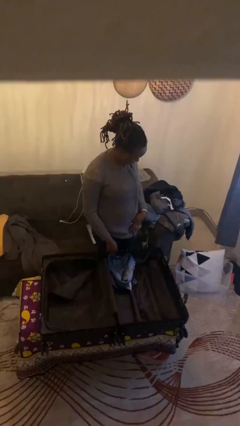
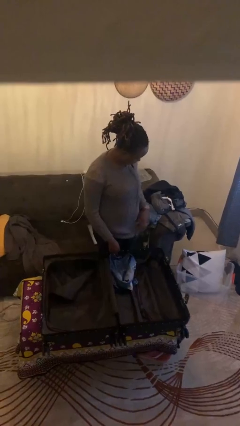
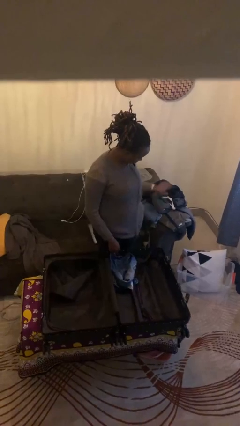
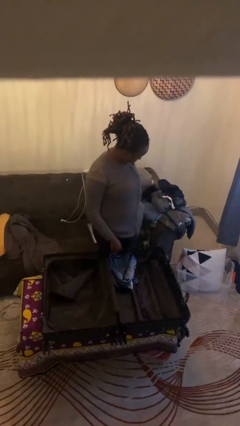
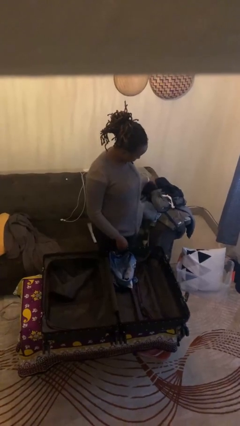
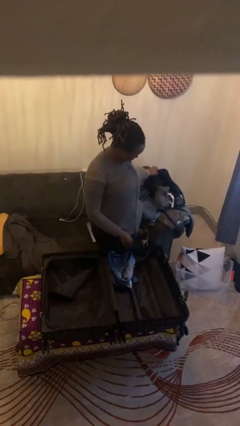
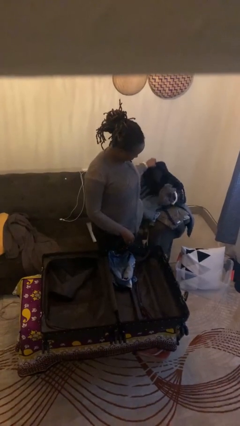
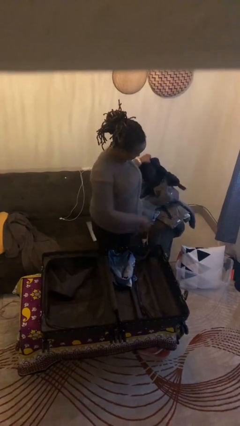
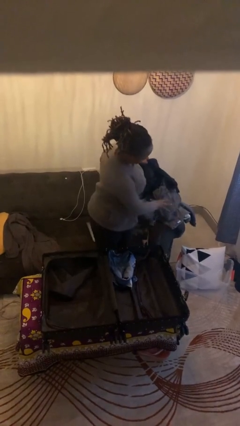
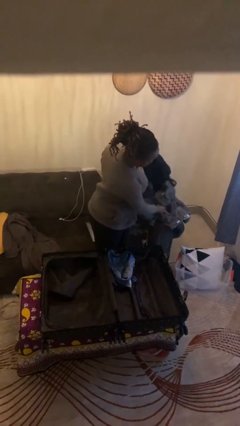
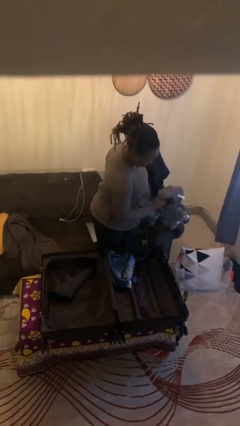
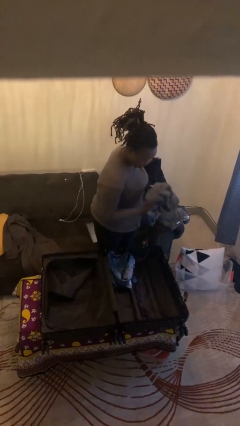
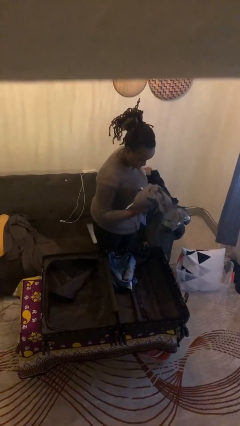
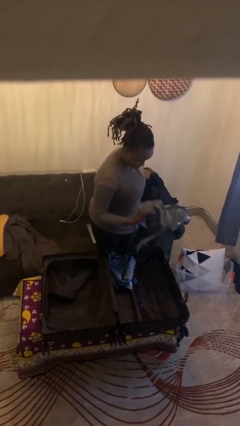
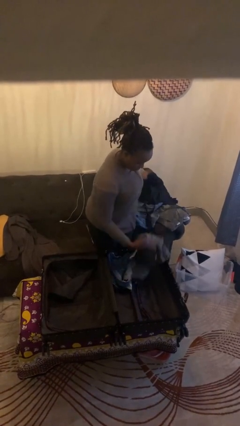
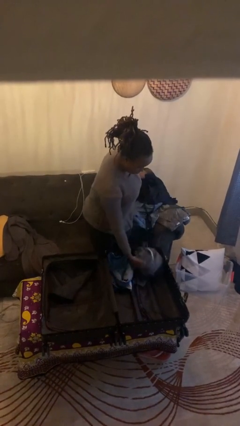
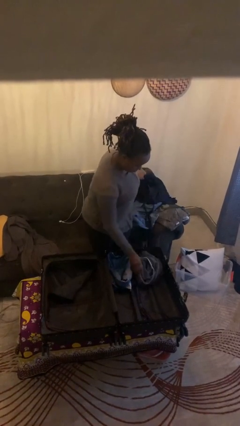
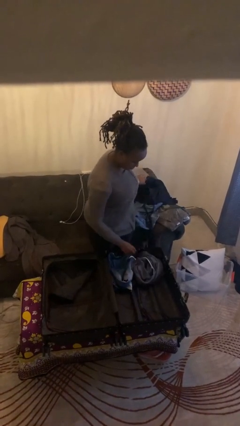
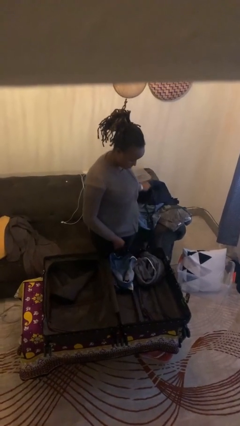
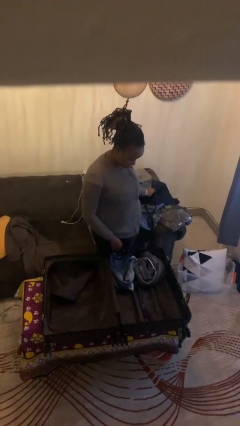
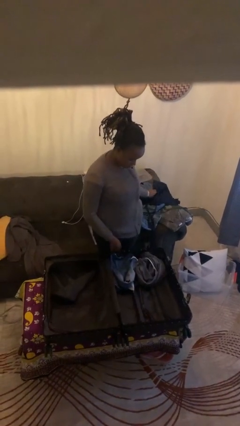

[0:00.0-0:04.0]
person loads clothes into suitcase

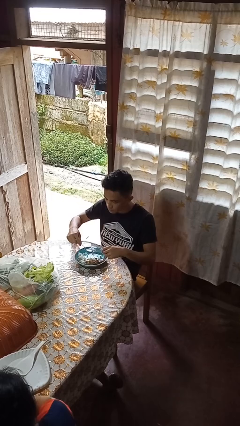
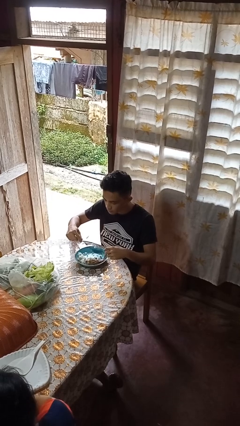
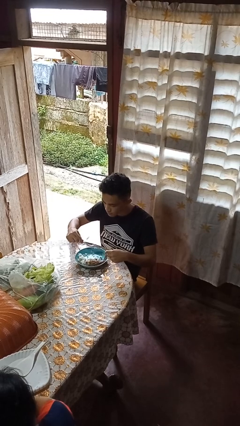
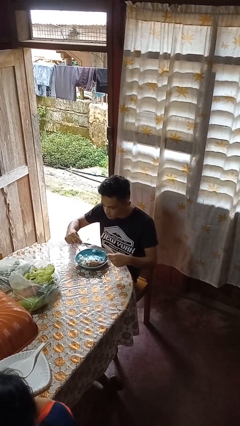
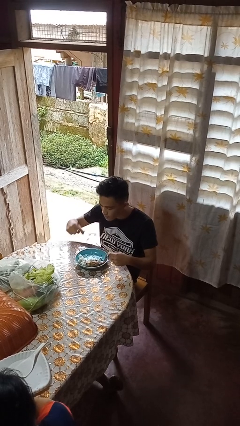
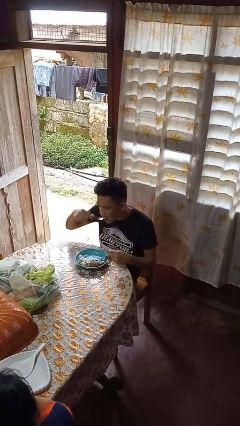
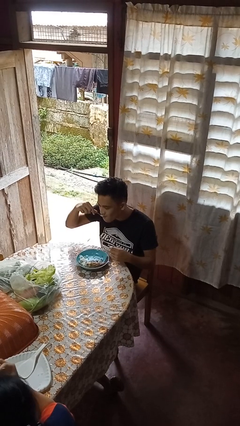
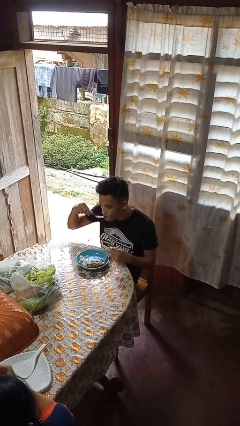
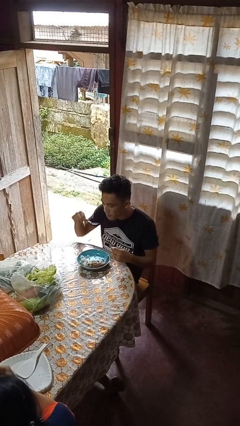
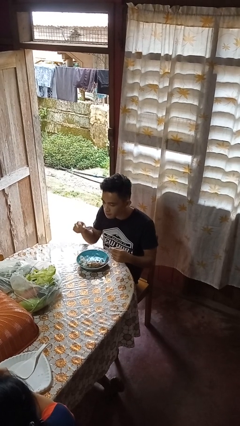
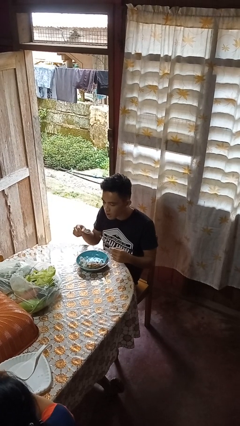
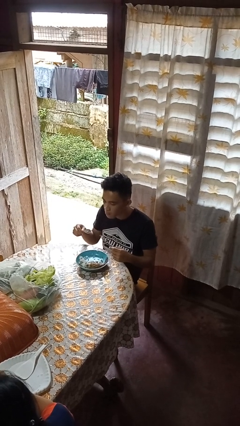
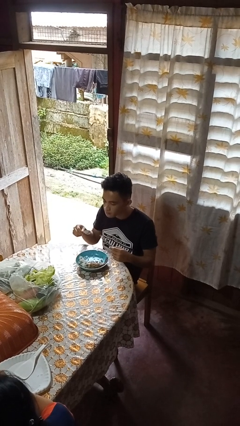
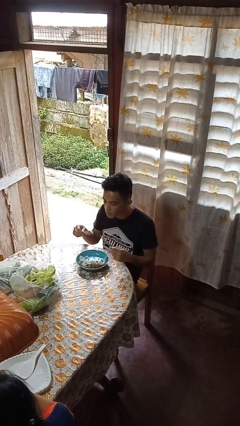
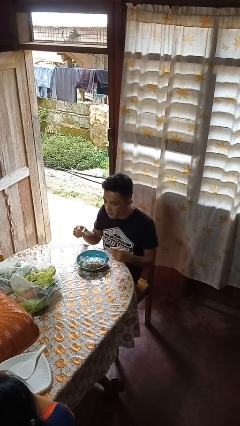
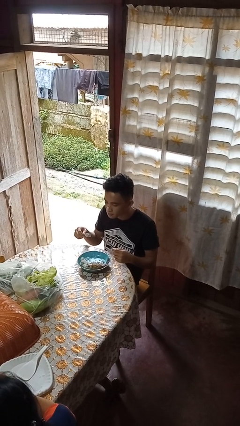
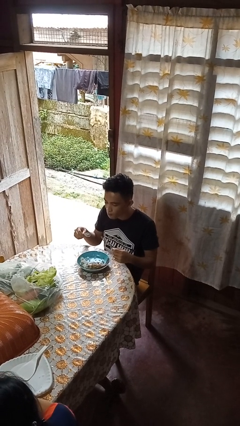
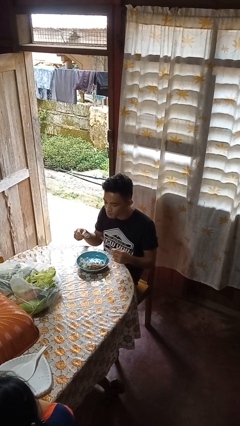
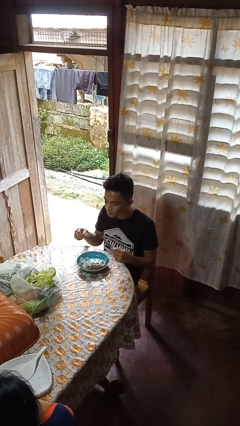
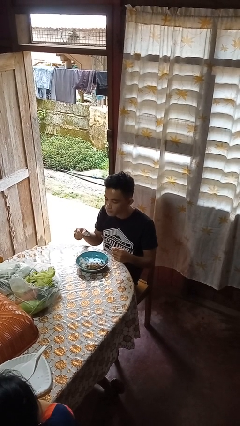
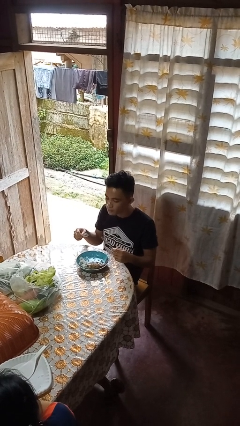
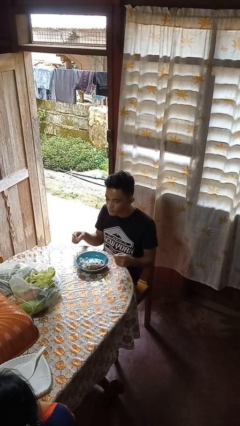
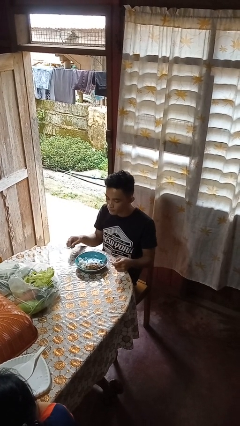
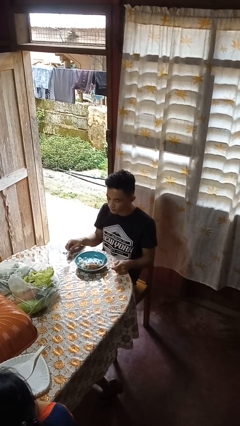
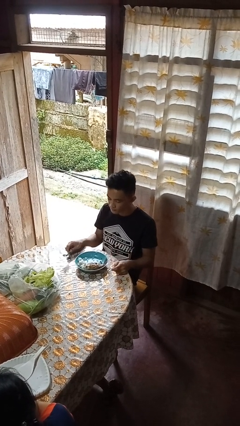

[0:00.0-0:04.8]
person eats with utensil

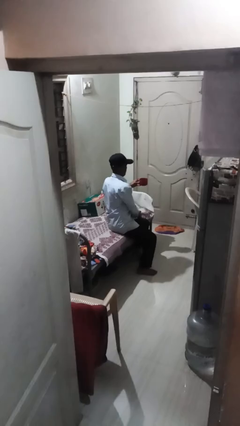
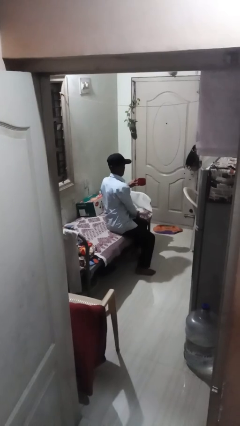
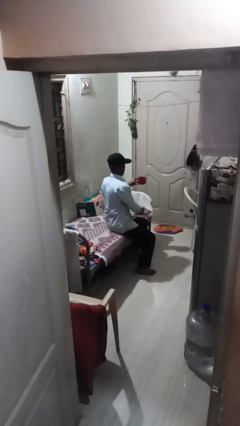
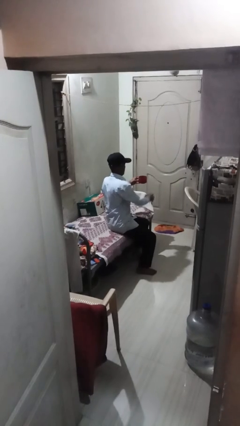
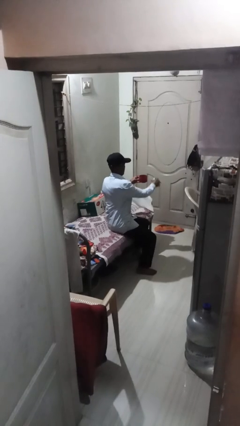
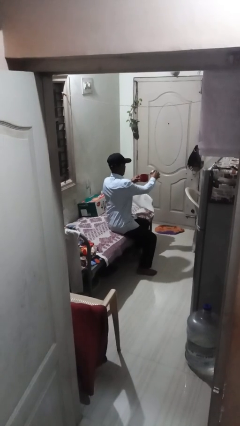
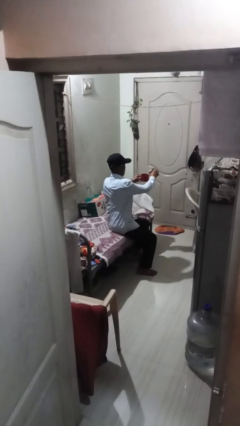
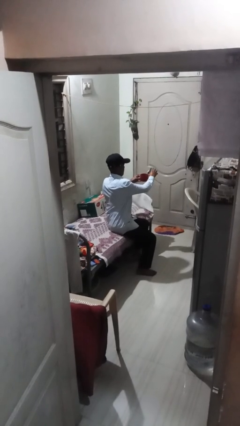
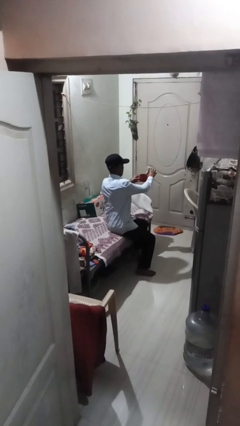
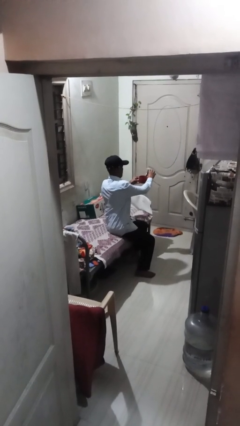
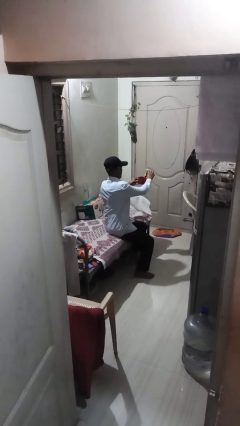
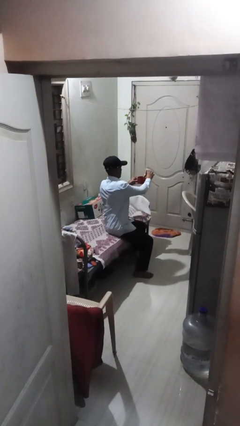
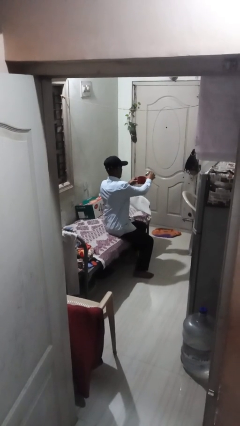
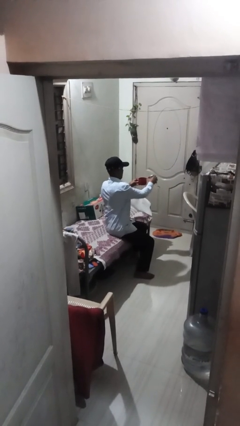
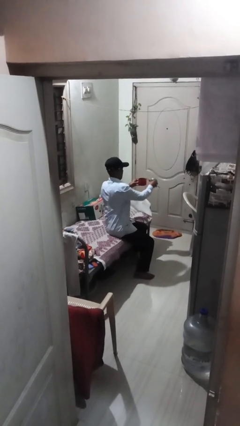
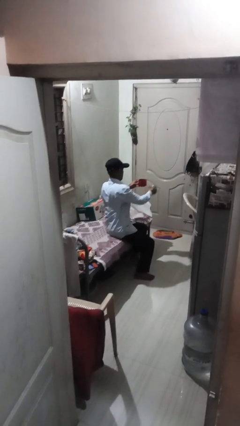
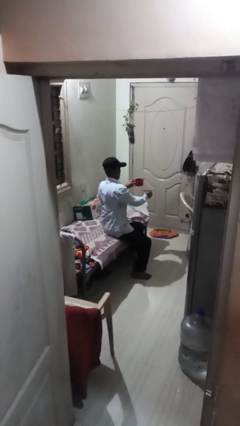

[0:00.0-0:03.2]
person pours coffee into mug

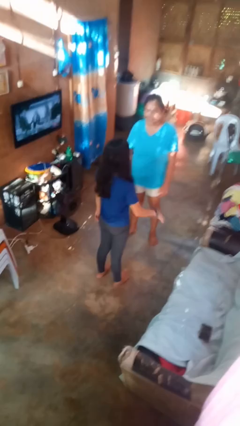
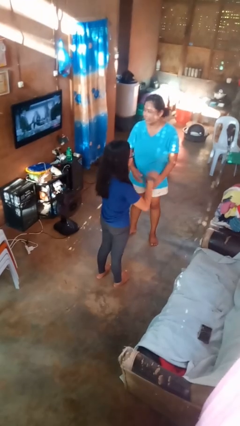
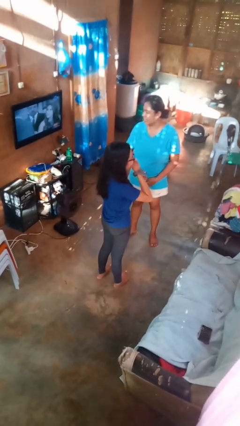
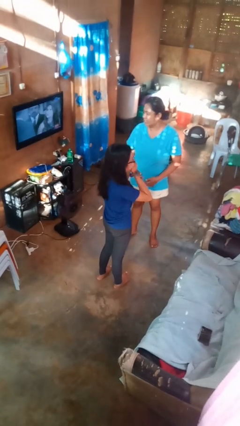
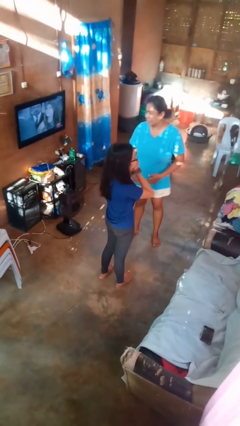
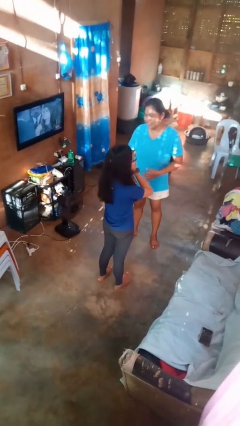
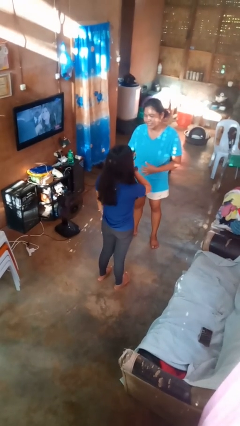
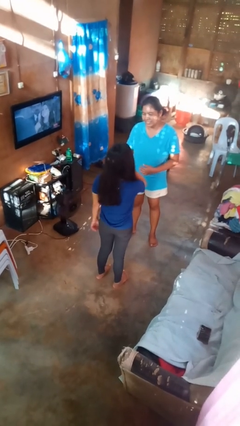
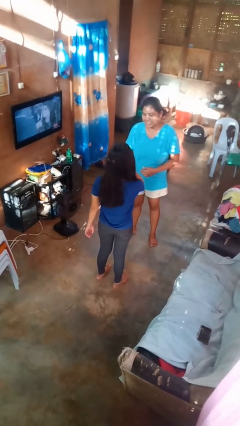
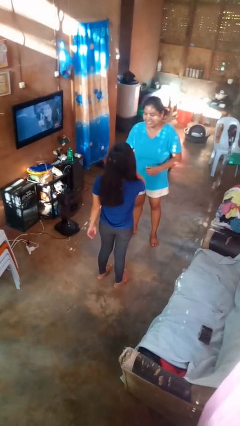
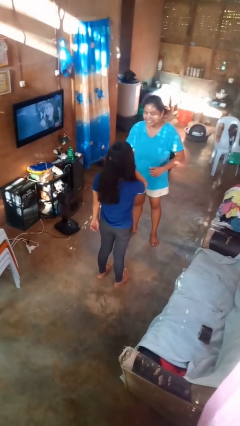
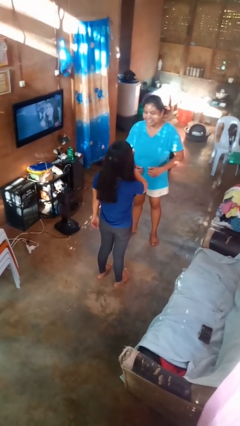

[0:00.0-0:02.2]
person laughs with person

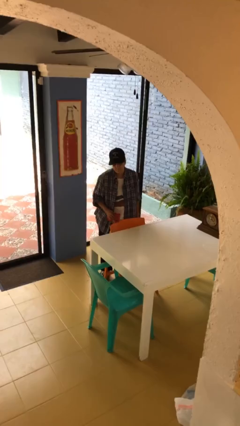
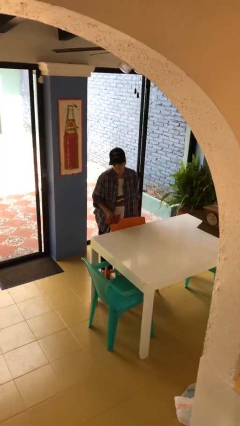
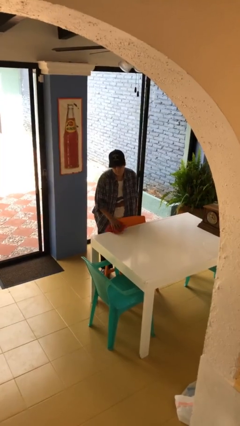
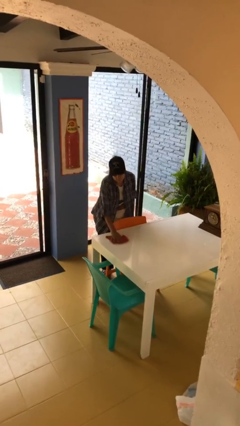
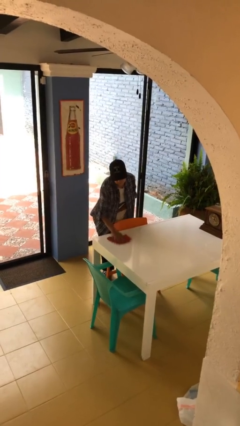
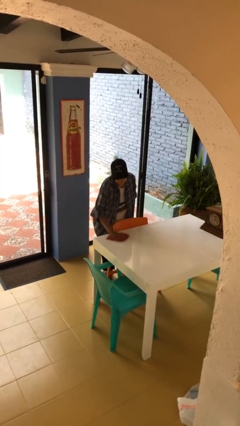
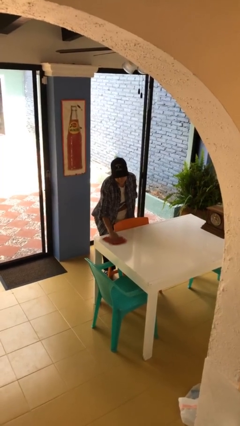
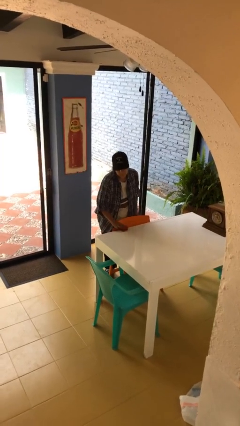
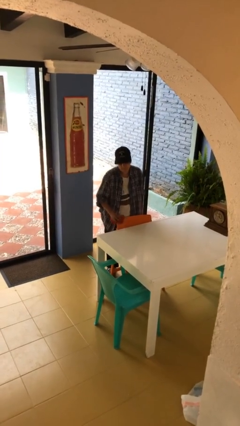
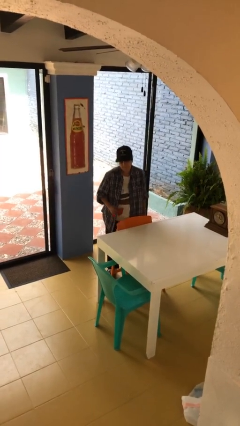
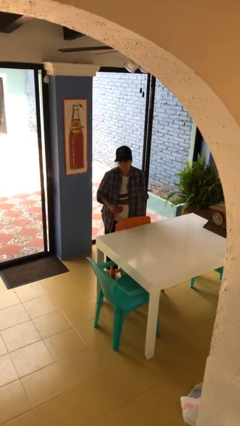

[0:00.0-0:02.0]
person cleans table with rag

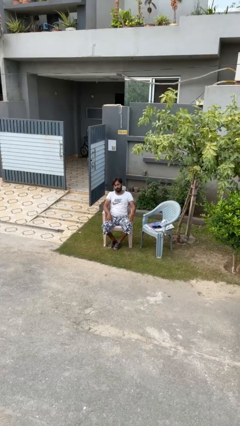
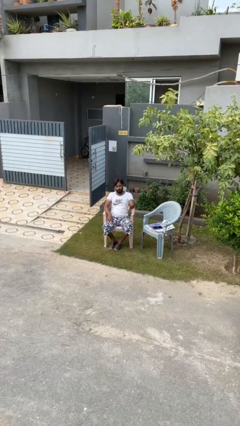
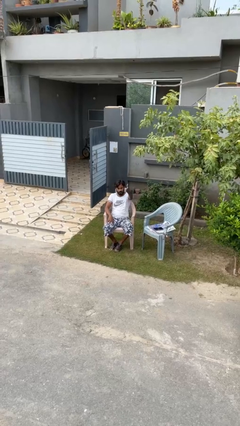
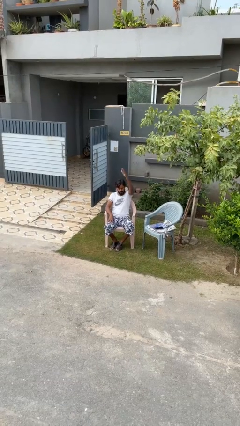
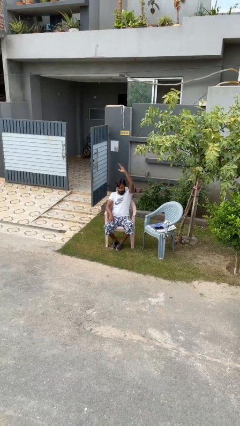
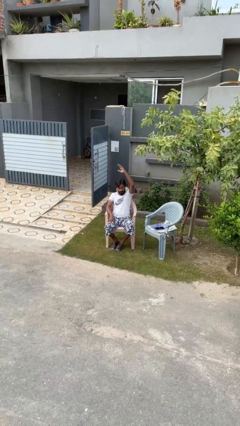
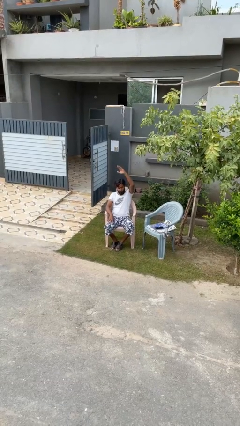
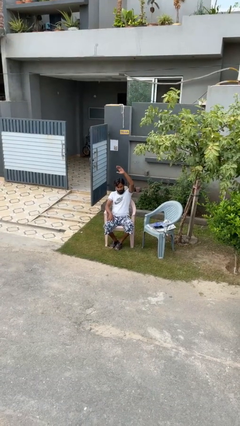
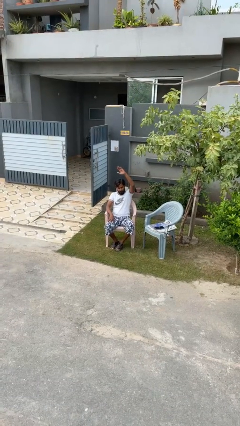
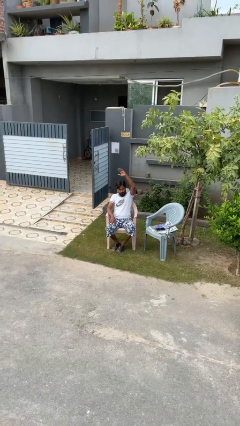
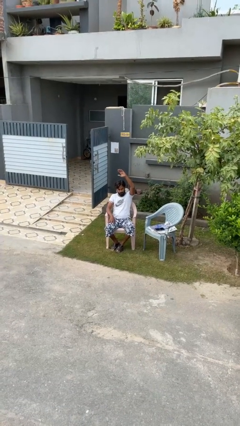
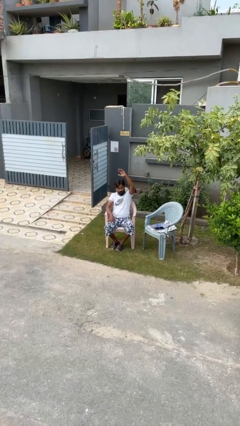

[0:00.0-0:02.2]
person gestures swipe up
